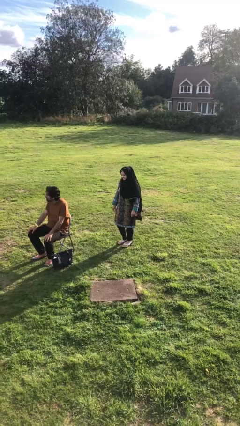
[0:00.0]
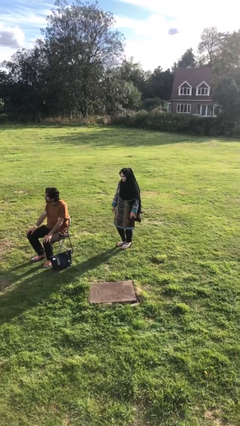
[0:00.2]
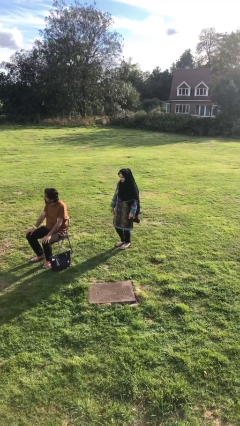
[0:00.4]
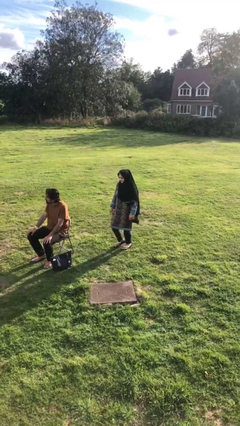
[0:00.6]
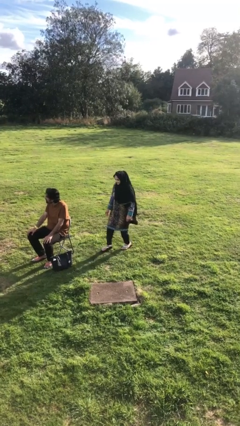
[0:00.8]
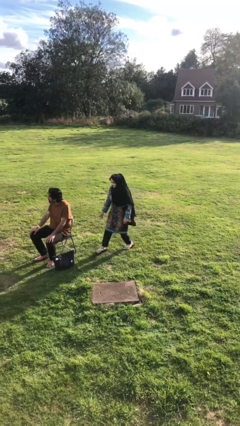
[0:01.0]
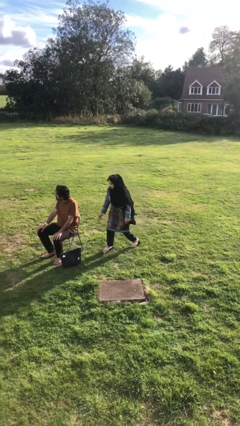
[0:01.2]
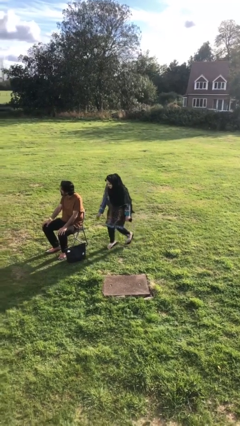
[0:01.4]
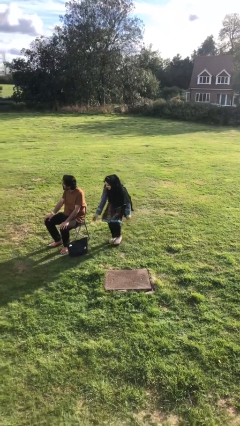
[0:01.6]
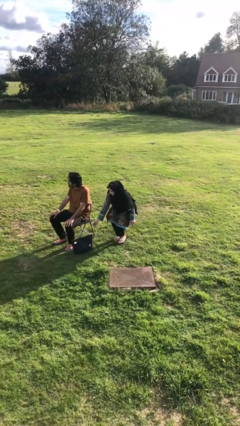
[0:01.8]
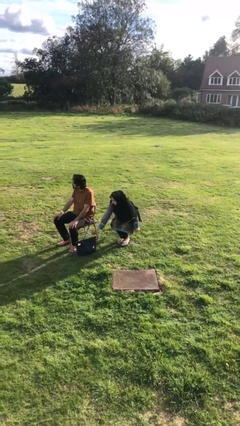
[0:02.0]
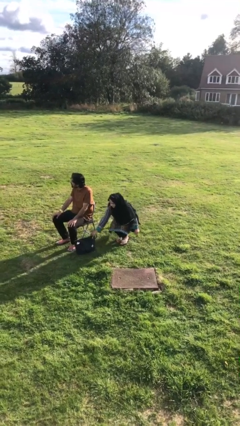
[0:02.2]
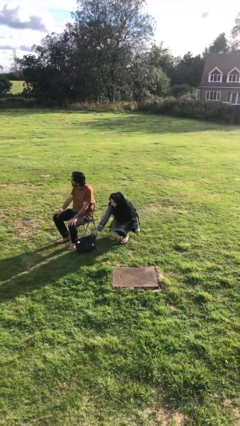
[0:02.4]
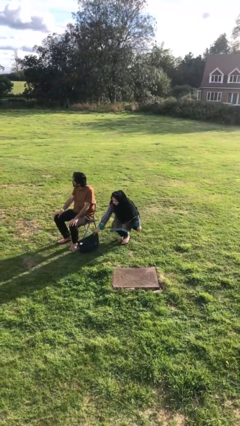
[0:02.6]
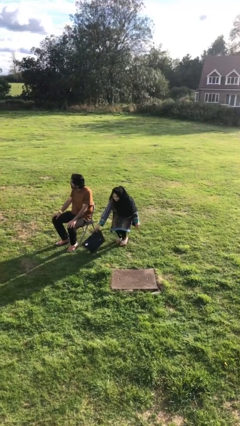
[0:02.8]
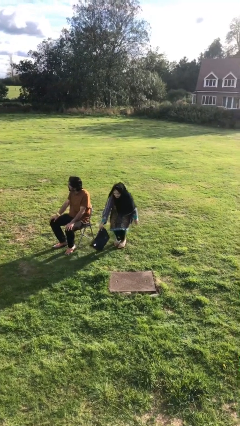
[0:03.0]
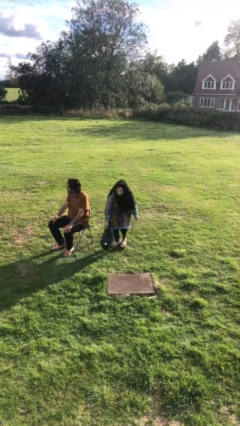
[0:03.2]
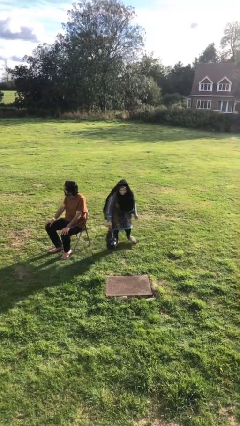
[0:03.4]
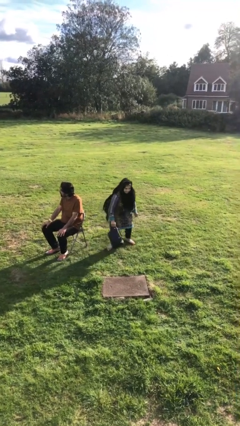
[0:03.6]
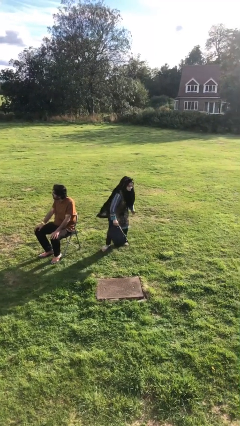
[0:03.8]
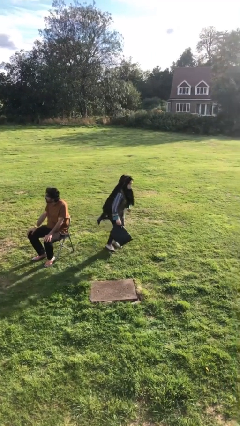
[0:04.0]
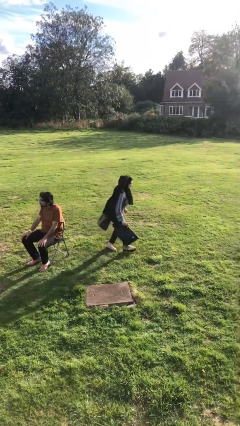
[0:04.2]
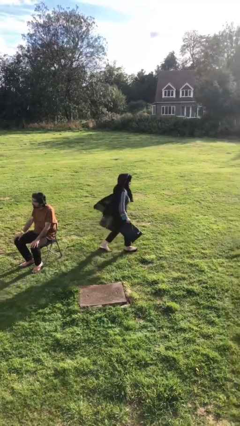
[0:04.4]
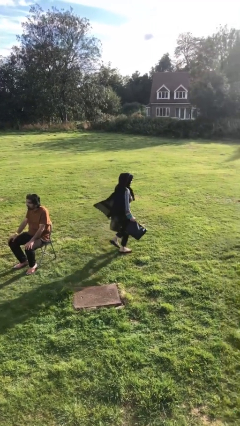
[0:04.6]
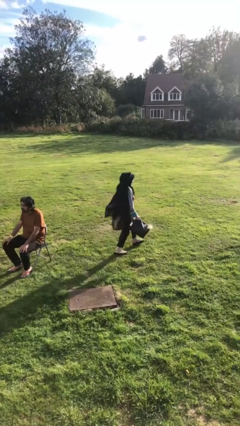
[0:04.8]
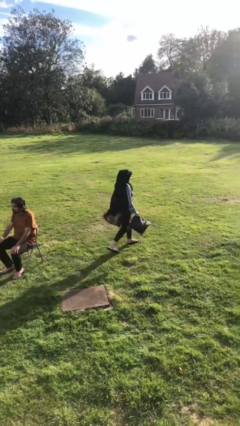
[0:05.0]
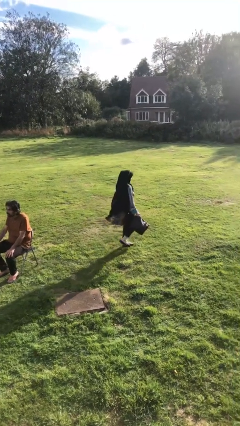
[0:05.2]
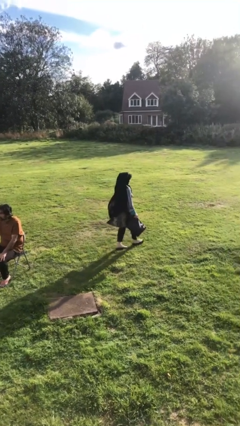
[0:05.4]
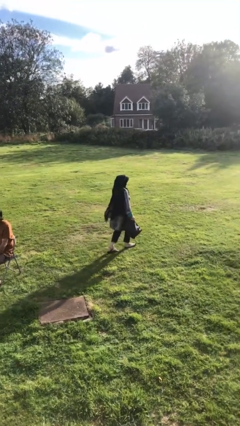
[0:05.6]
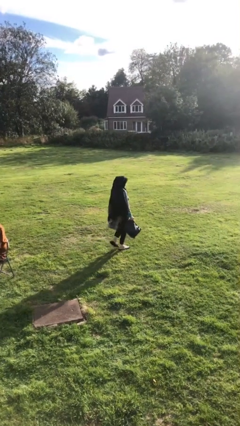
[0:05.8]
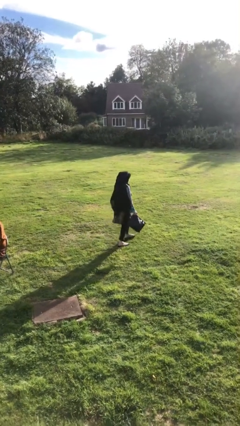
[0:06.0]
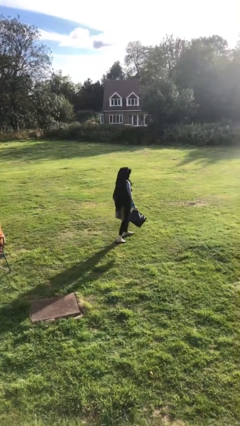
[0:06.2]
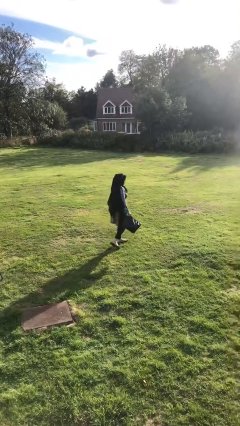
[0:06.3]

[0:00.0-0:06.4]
person steals object from person

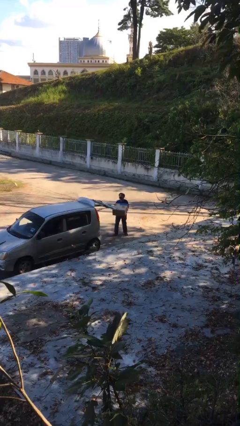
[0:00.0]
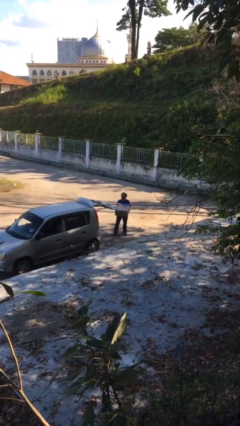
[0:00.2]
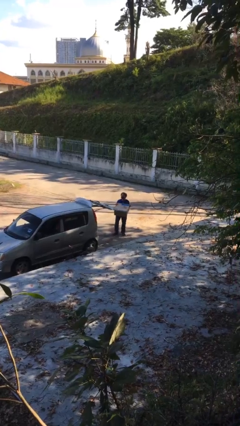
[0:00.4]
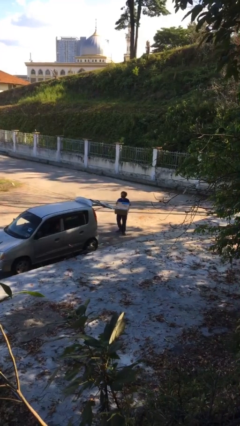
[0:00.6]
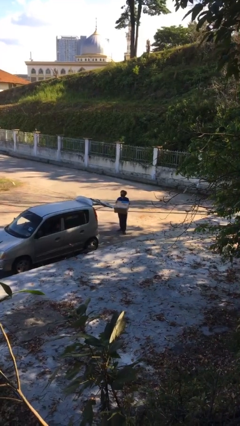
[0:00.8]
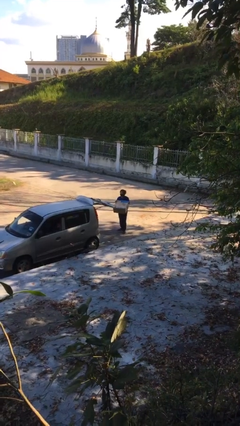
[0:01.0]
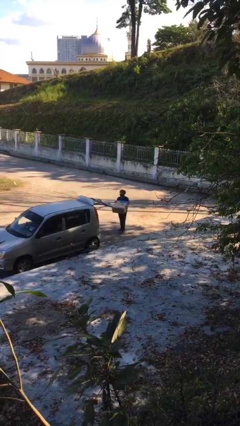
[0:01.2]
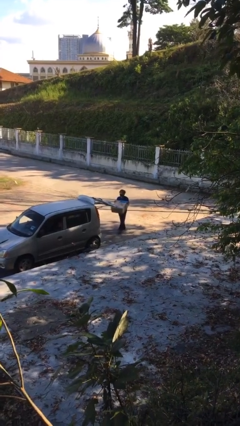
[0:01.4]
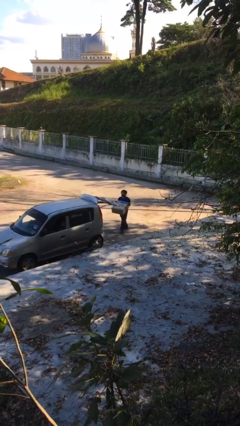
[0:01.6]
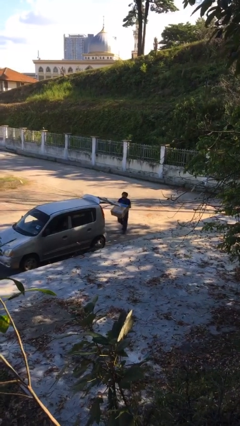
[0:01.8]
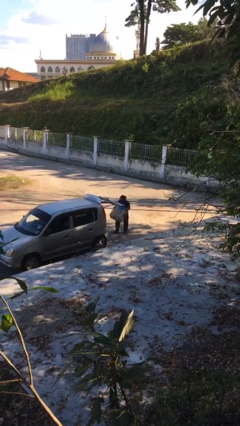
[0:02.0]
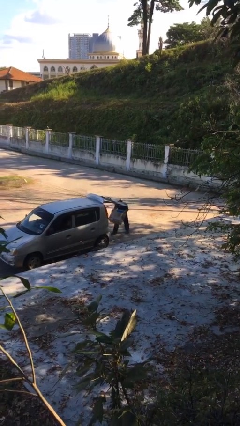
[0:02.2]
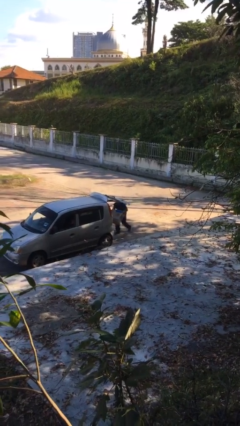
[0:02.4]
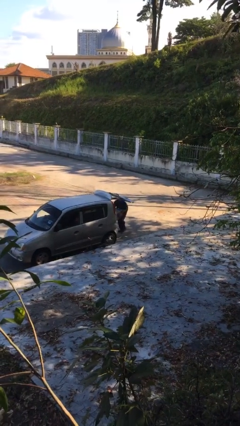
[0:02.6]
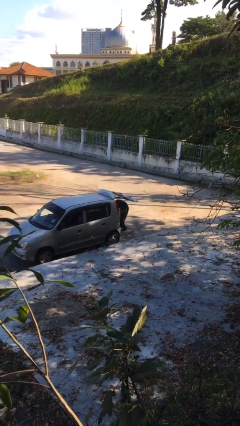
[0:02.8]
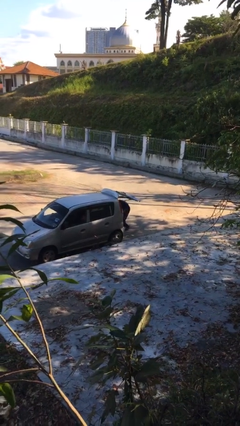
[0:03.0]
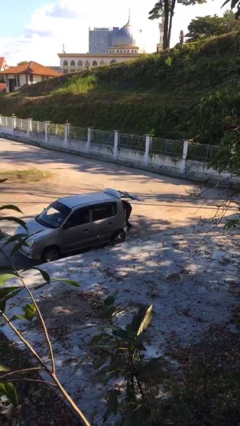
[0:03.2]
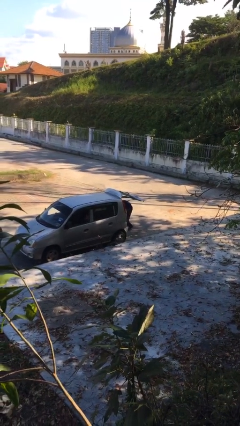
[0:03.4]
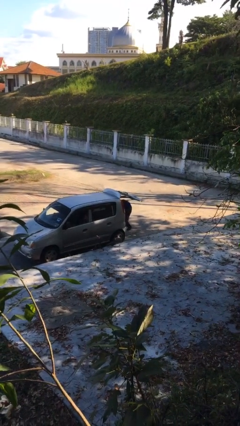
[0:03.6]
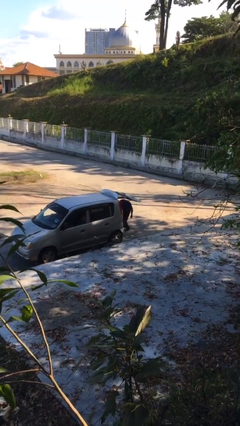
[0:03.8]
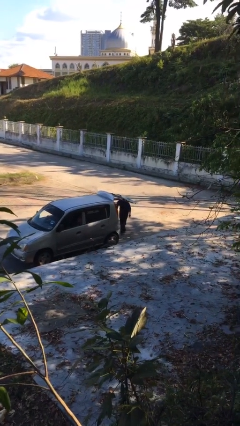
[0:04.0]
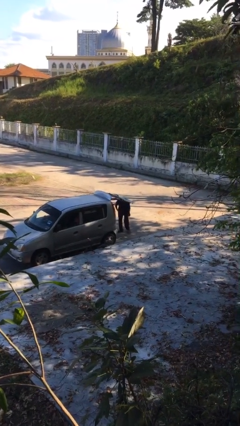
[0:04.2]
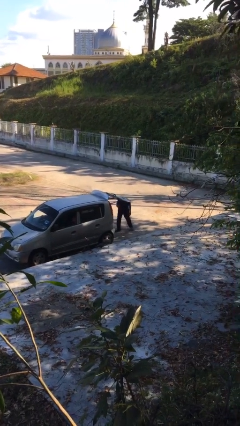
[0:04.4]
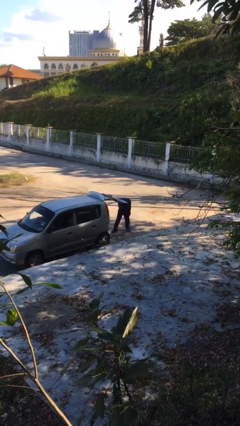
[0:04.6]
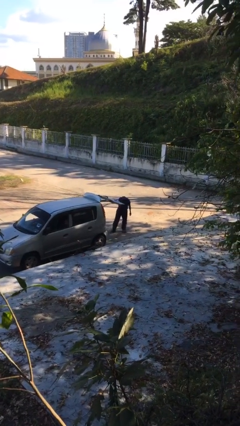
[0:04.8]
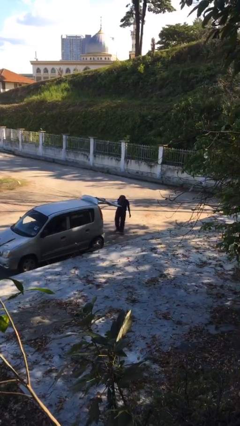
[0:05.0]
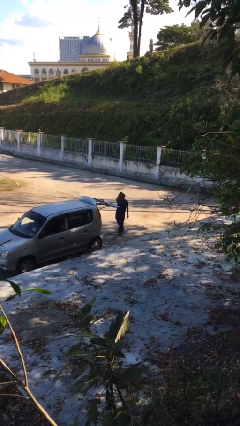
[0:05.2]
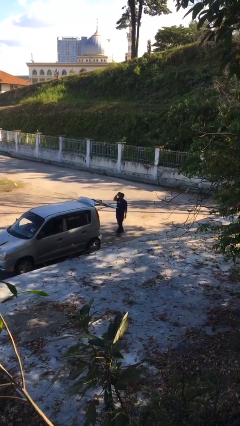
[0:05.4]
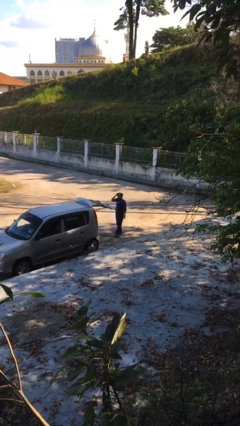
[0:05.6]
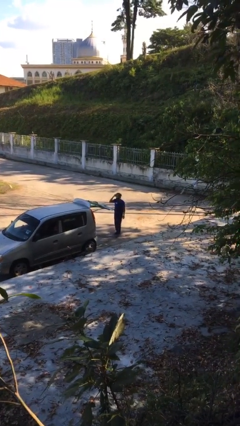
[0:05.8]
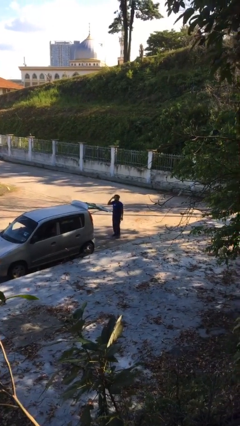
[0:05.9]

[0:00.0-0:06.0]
person loads car

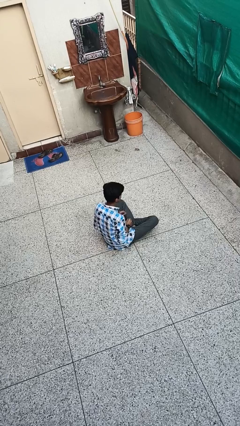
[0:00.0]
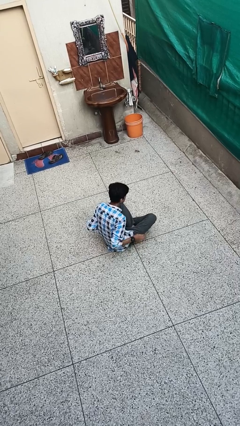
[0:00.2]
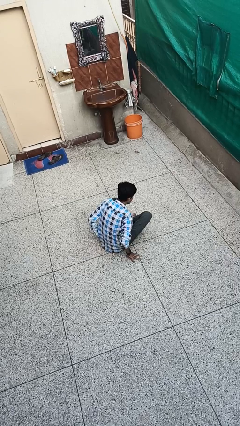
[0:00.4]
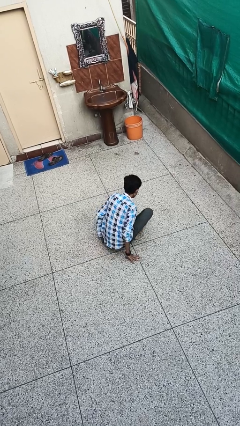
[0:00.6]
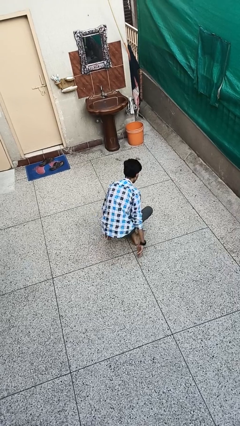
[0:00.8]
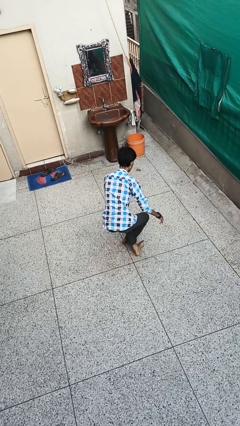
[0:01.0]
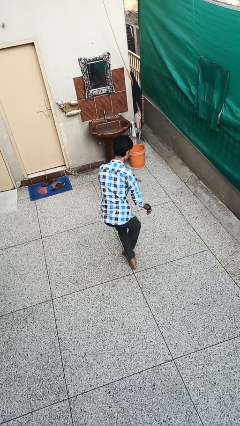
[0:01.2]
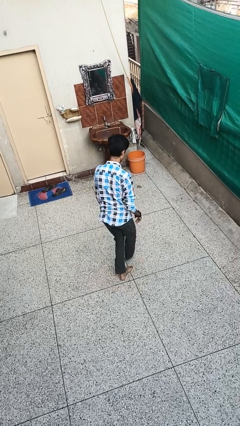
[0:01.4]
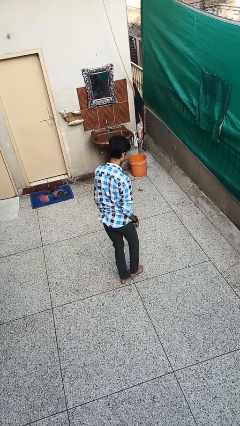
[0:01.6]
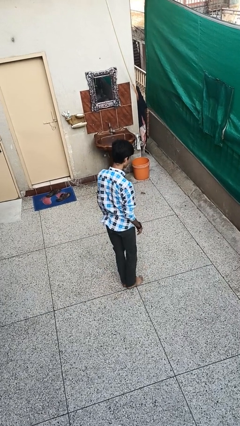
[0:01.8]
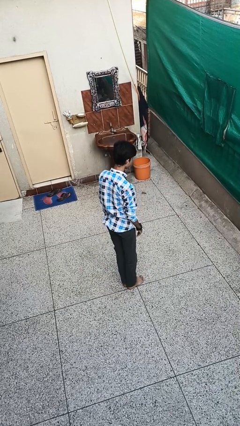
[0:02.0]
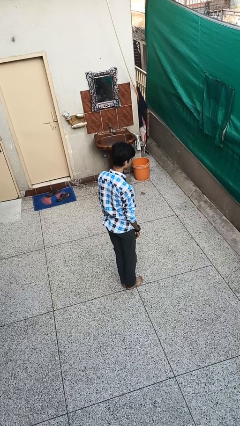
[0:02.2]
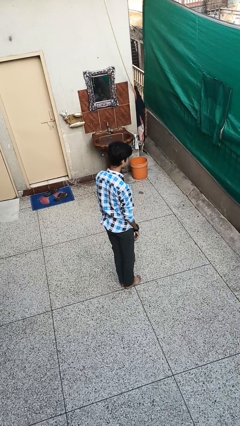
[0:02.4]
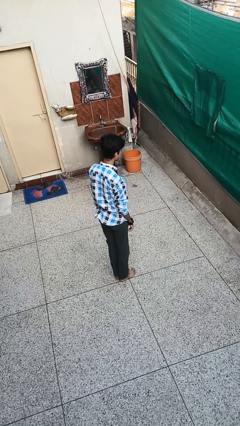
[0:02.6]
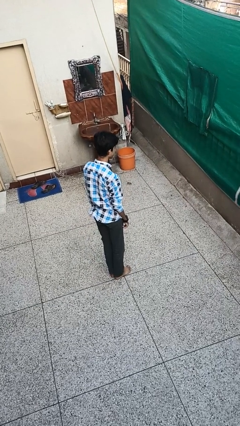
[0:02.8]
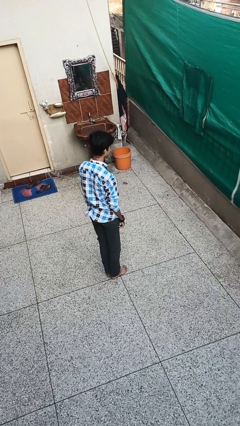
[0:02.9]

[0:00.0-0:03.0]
person stands up from floor

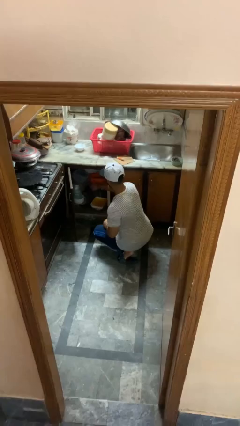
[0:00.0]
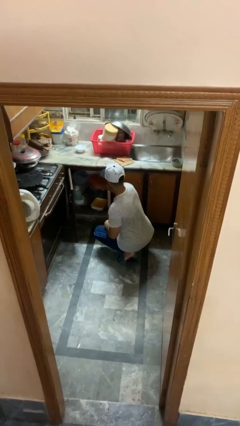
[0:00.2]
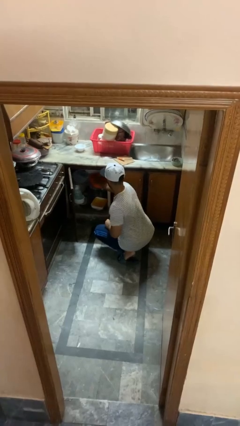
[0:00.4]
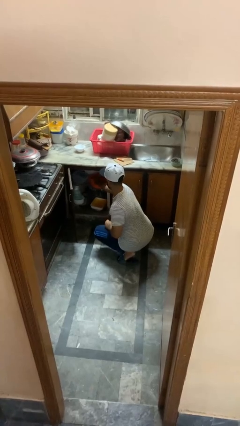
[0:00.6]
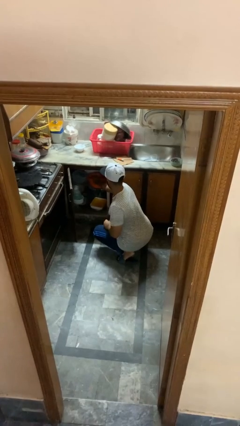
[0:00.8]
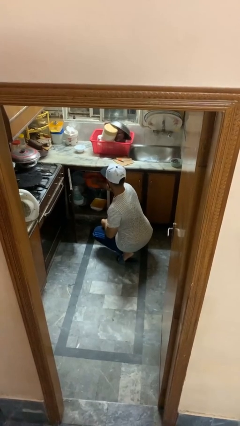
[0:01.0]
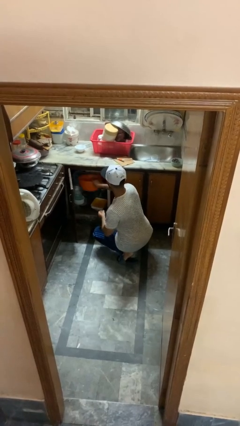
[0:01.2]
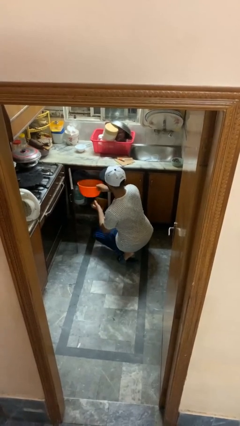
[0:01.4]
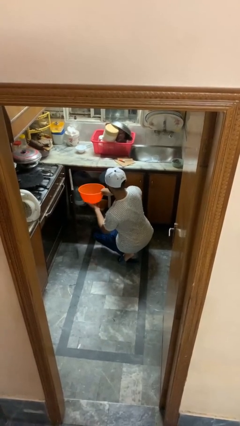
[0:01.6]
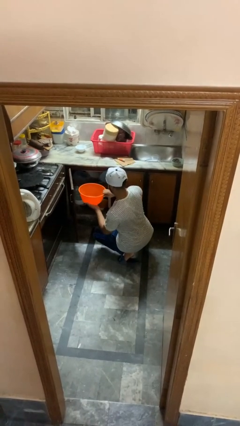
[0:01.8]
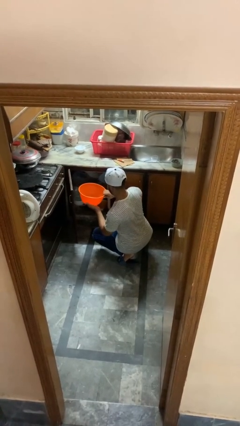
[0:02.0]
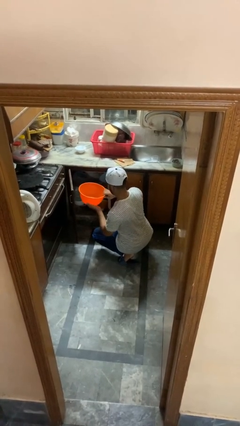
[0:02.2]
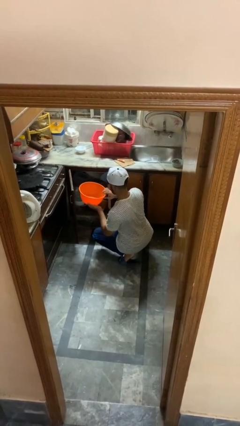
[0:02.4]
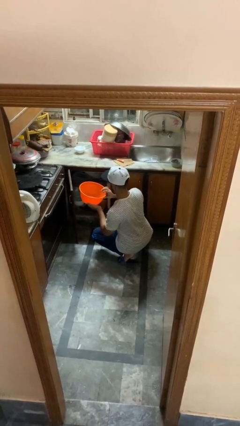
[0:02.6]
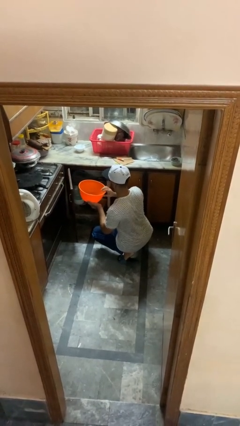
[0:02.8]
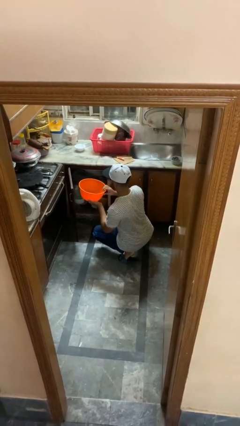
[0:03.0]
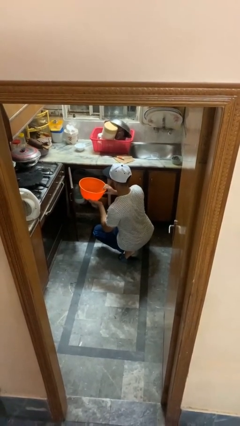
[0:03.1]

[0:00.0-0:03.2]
person takes object from kitchen drawer
